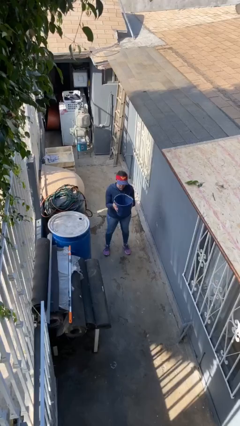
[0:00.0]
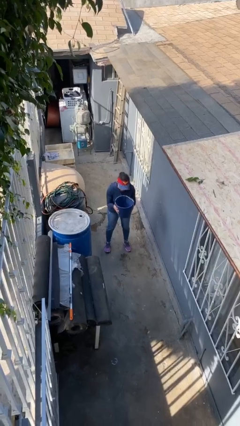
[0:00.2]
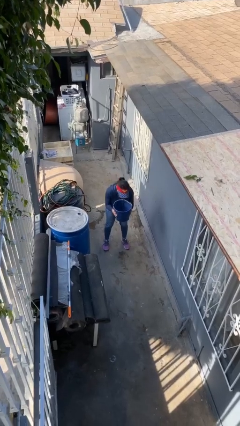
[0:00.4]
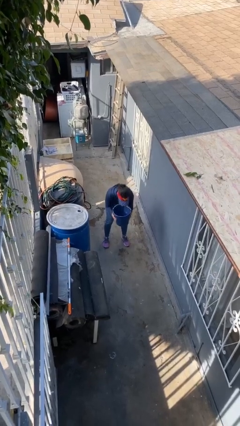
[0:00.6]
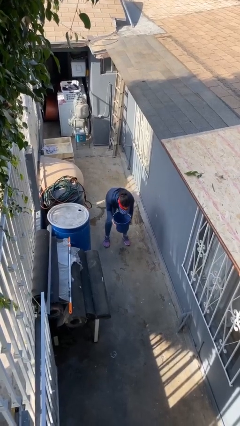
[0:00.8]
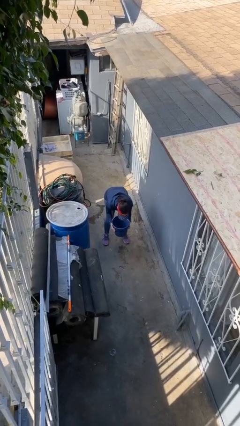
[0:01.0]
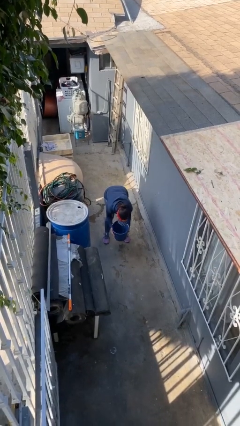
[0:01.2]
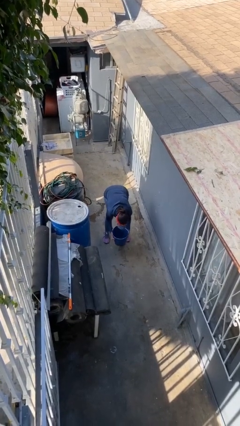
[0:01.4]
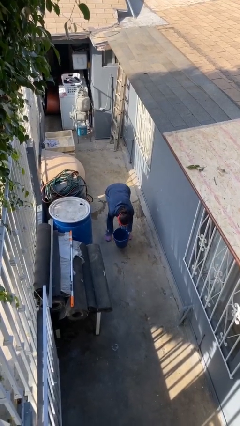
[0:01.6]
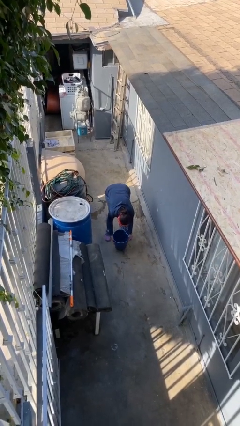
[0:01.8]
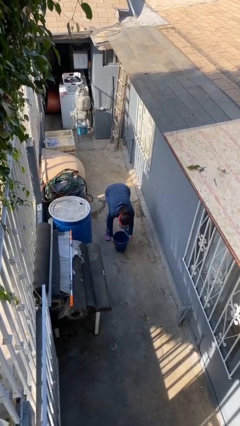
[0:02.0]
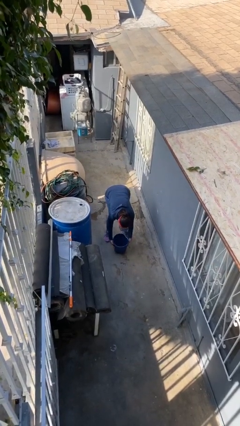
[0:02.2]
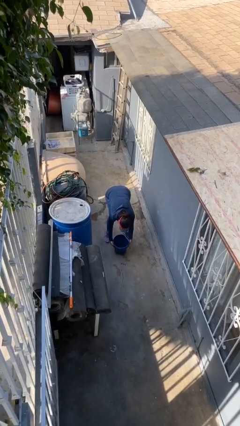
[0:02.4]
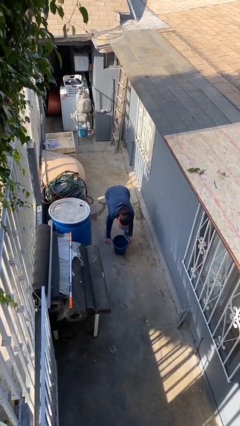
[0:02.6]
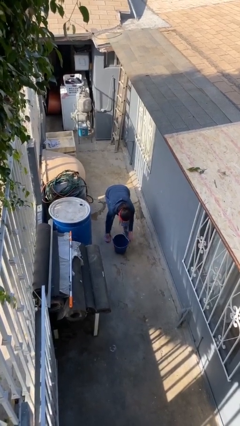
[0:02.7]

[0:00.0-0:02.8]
person puts down object on floor

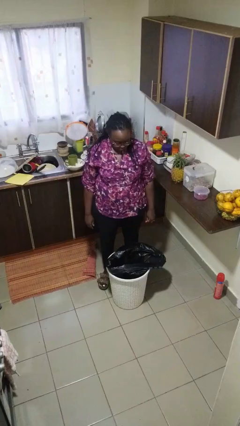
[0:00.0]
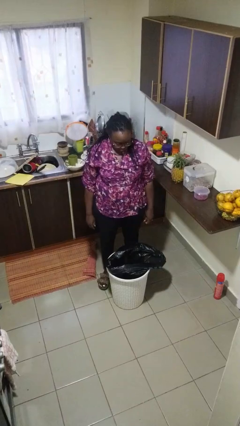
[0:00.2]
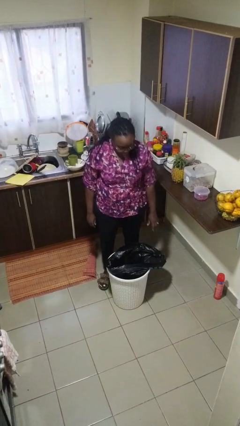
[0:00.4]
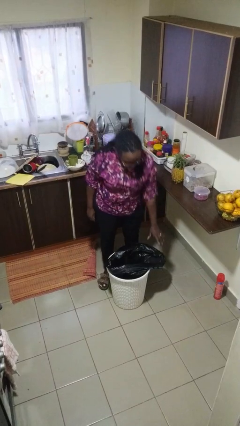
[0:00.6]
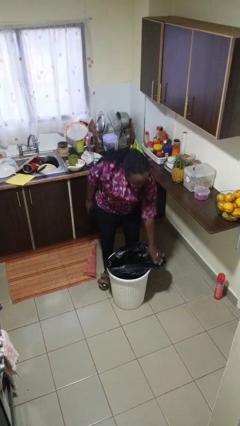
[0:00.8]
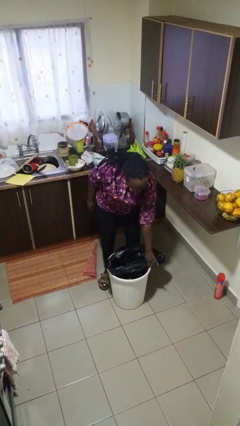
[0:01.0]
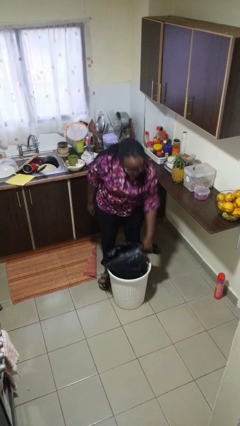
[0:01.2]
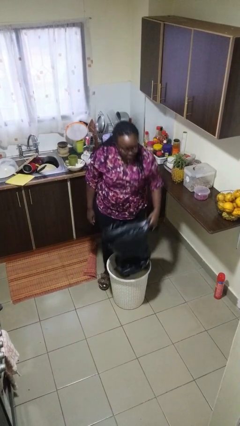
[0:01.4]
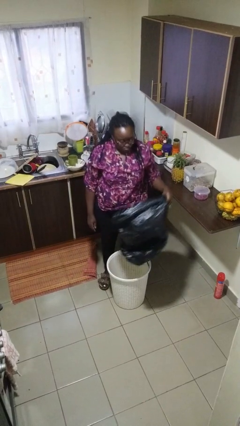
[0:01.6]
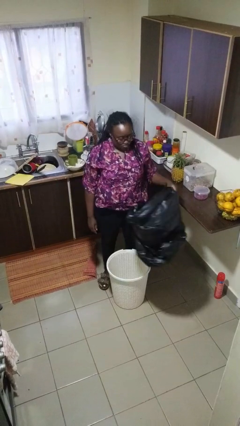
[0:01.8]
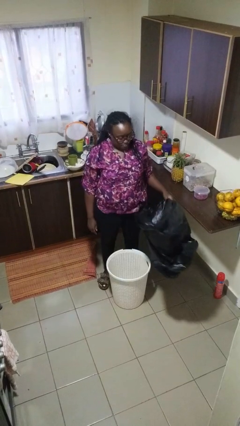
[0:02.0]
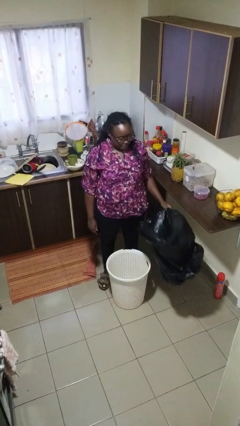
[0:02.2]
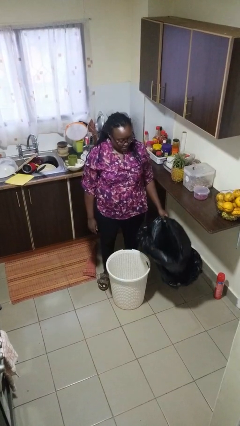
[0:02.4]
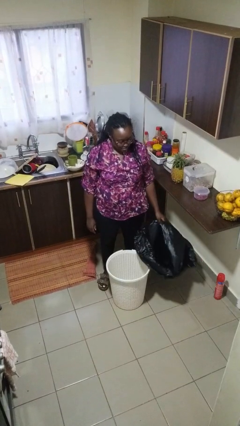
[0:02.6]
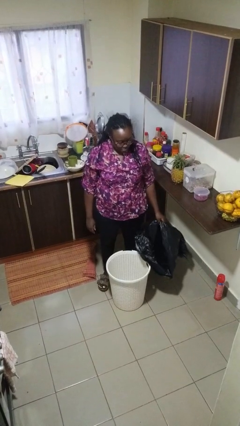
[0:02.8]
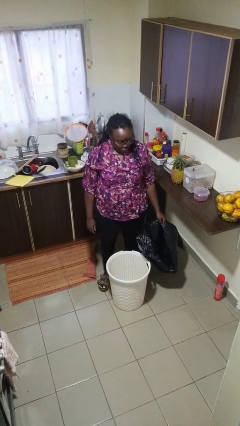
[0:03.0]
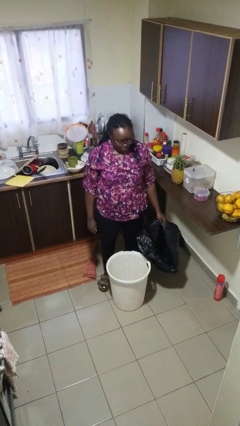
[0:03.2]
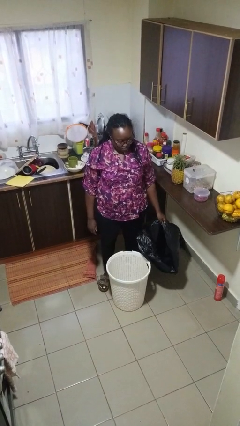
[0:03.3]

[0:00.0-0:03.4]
person inserts trashbag into trashcan

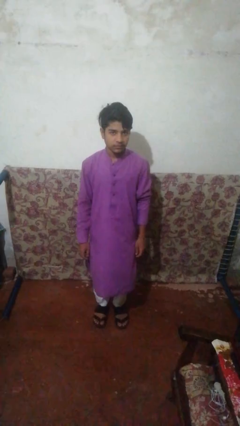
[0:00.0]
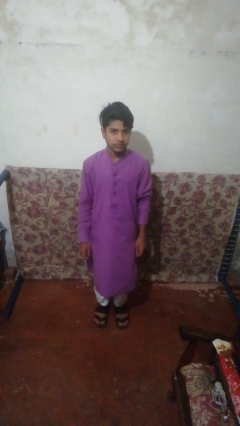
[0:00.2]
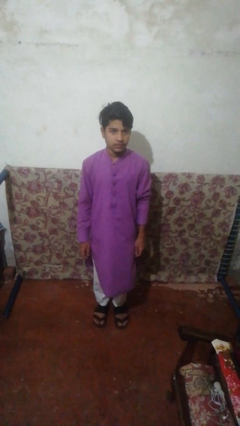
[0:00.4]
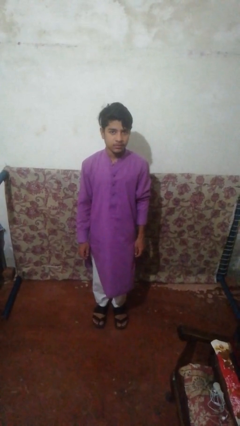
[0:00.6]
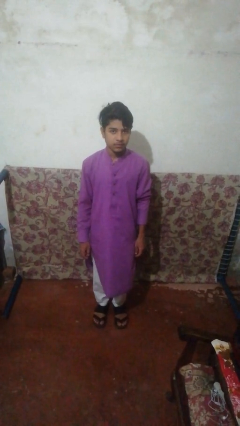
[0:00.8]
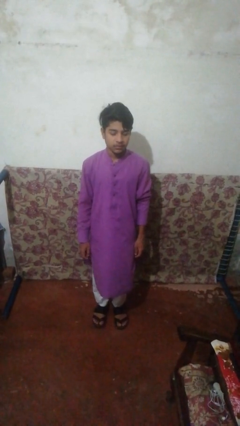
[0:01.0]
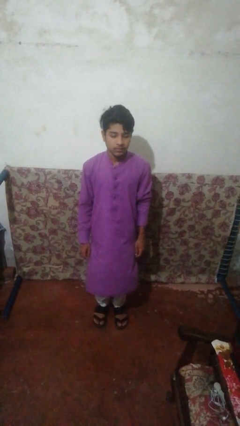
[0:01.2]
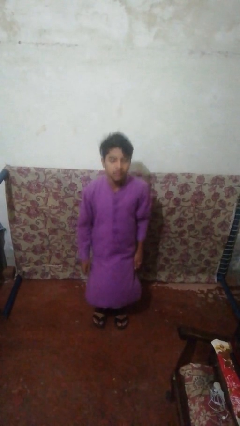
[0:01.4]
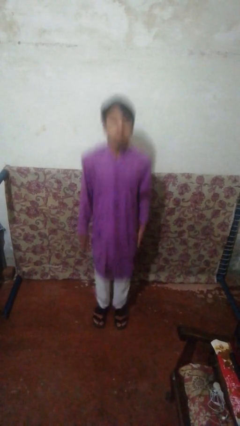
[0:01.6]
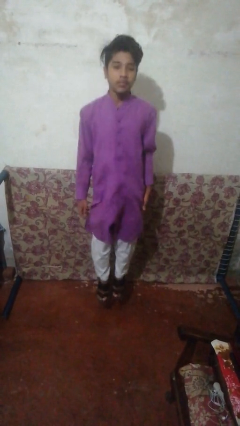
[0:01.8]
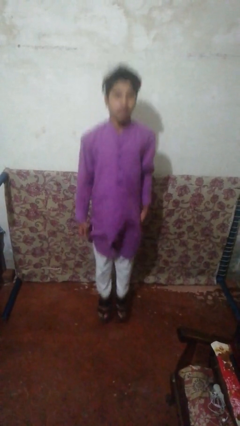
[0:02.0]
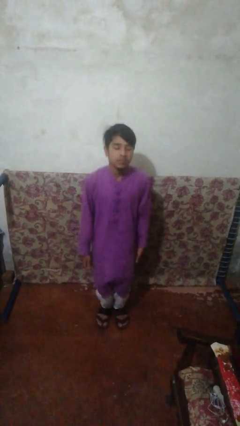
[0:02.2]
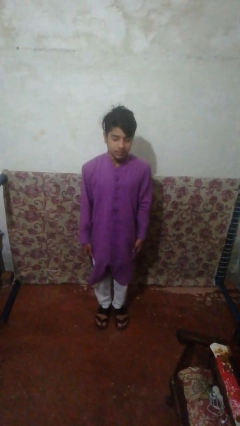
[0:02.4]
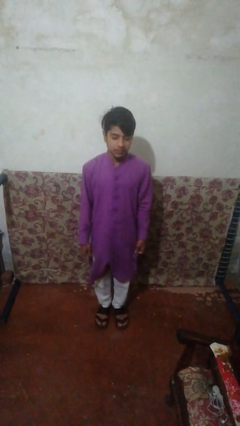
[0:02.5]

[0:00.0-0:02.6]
person jumps

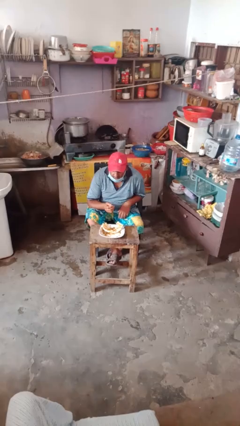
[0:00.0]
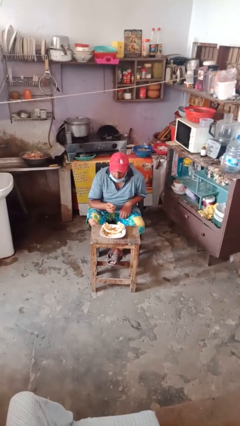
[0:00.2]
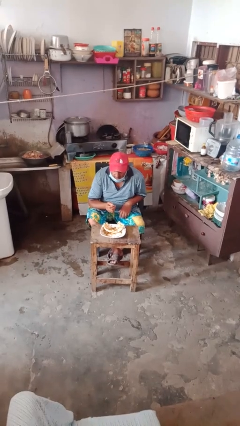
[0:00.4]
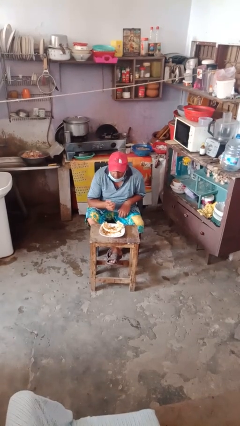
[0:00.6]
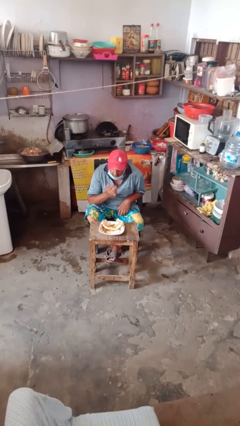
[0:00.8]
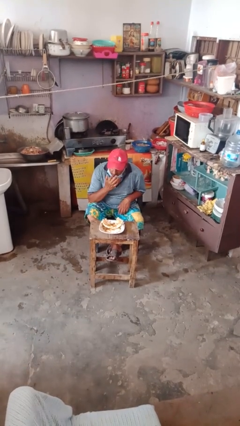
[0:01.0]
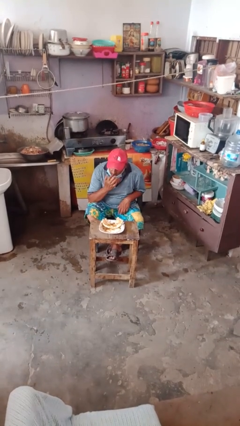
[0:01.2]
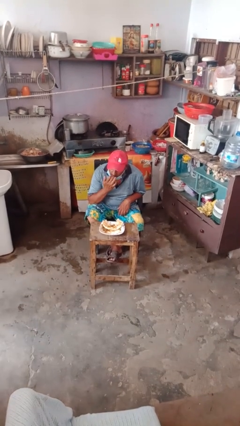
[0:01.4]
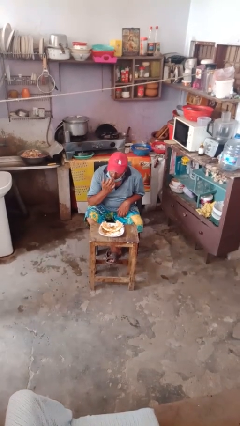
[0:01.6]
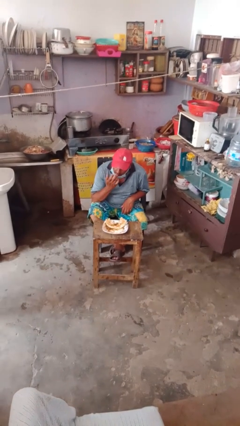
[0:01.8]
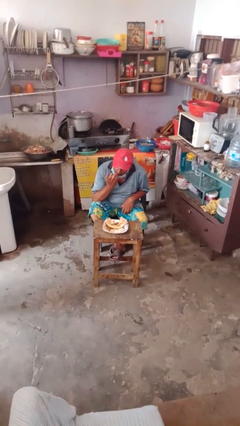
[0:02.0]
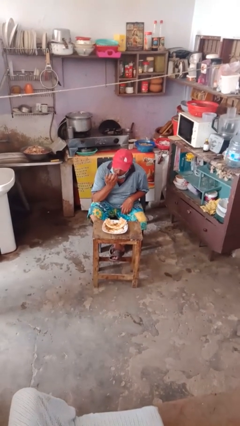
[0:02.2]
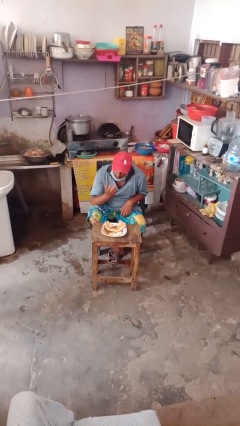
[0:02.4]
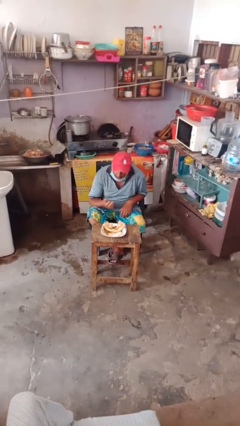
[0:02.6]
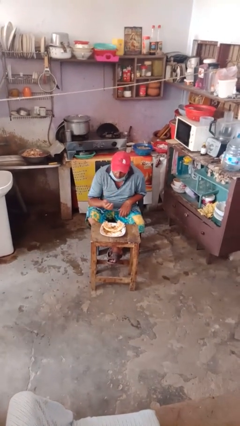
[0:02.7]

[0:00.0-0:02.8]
person licks fingers

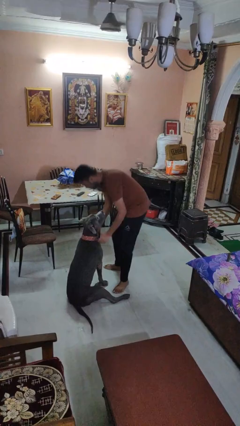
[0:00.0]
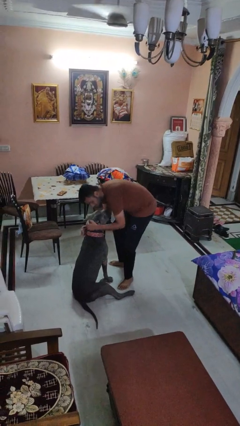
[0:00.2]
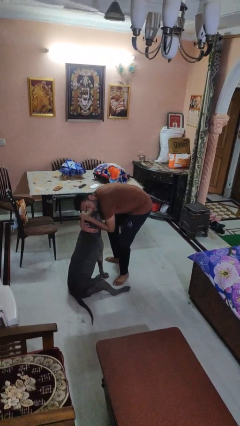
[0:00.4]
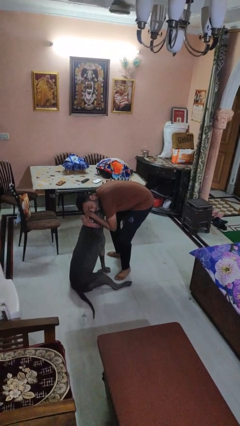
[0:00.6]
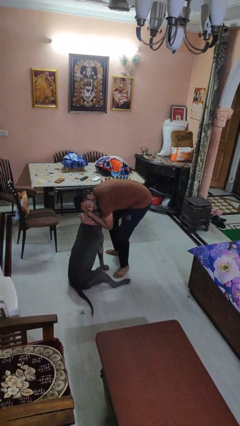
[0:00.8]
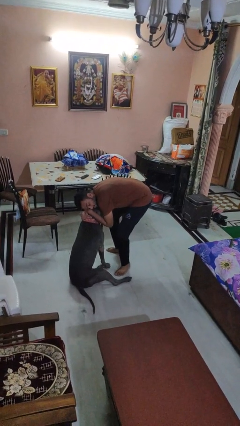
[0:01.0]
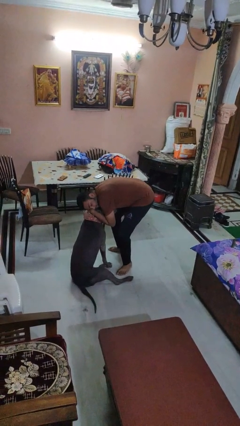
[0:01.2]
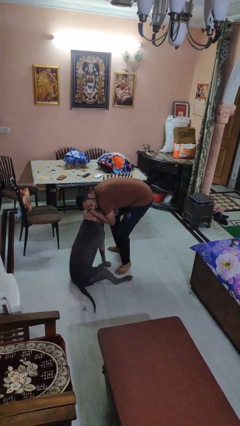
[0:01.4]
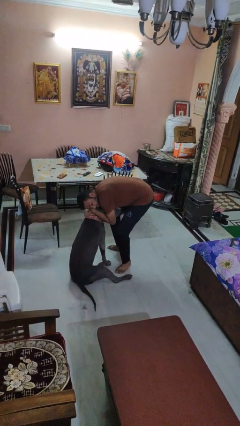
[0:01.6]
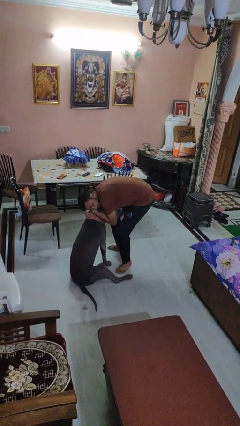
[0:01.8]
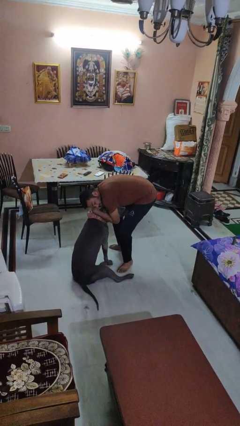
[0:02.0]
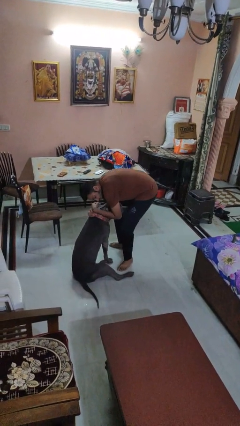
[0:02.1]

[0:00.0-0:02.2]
person hugs dog

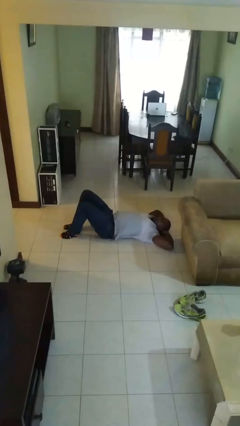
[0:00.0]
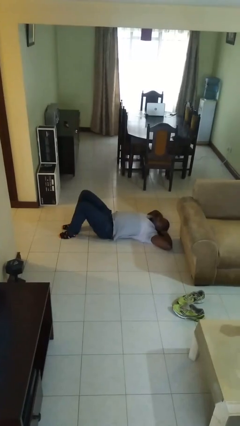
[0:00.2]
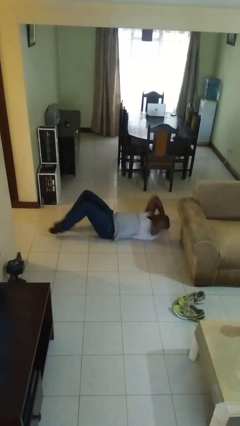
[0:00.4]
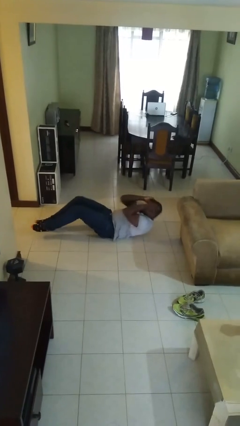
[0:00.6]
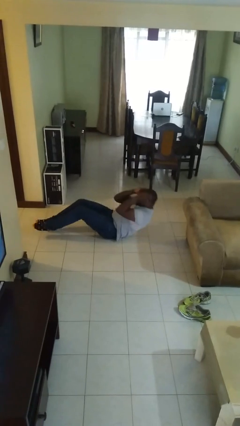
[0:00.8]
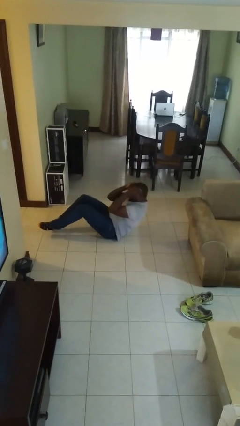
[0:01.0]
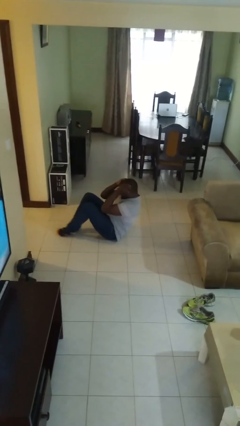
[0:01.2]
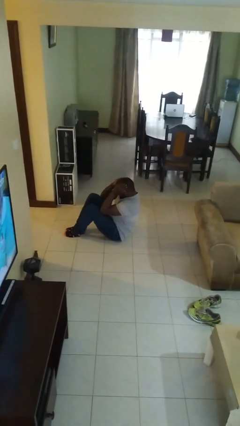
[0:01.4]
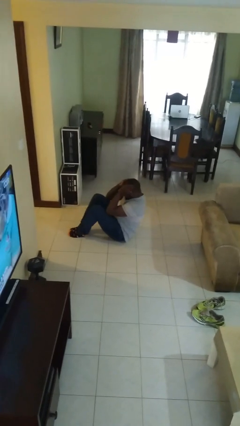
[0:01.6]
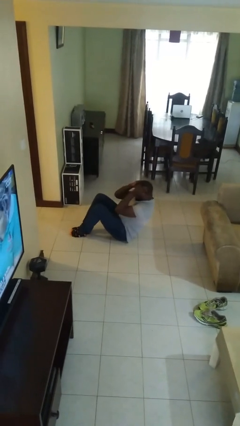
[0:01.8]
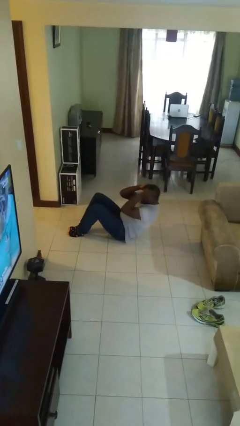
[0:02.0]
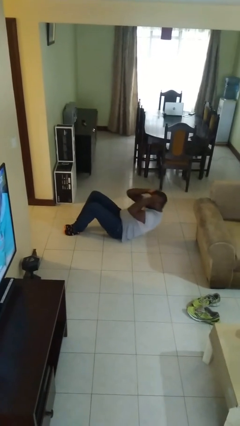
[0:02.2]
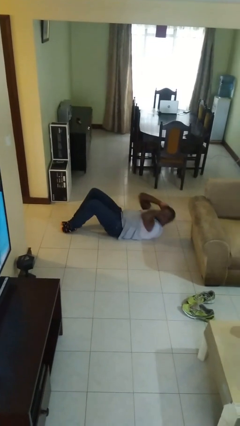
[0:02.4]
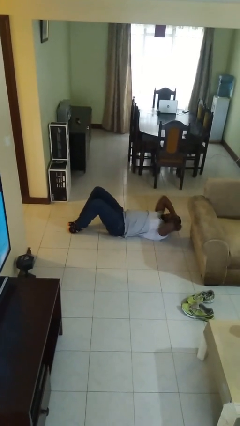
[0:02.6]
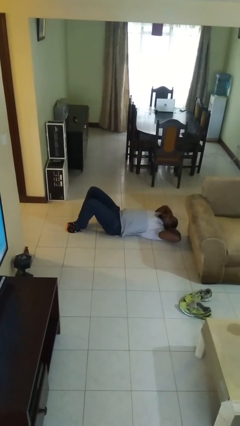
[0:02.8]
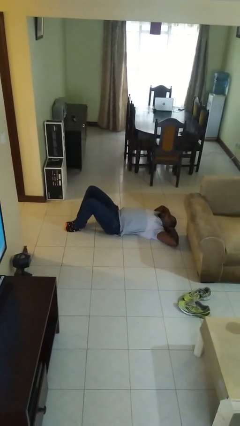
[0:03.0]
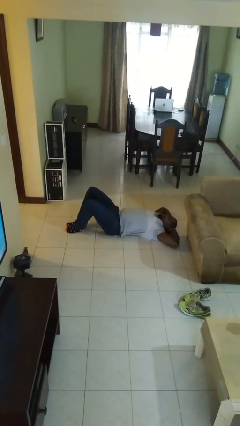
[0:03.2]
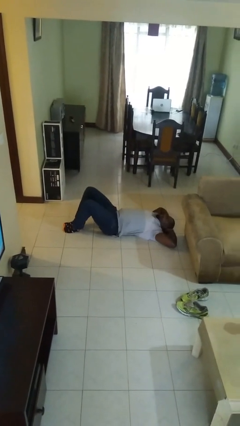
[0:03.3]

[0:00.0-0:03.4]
person exercises with situp
